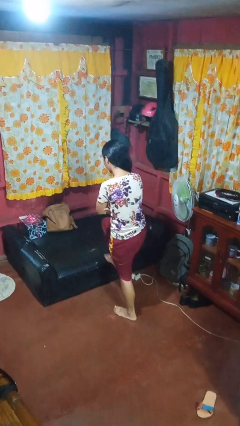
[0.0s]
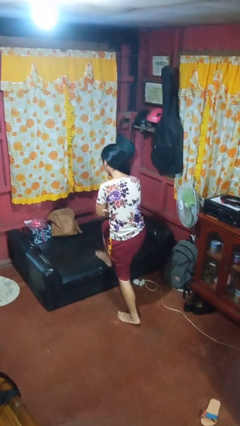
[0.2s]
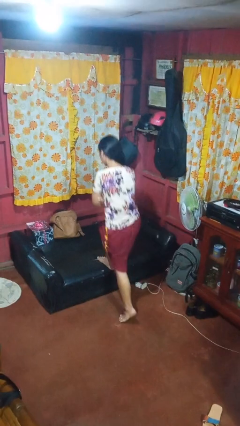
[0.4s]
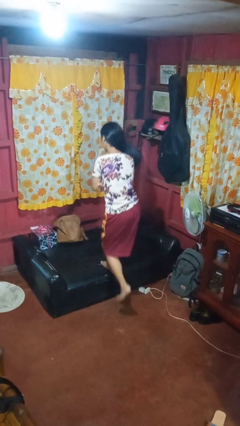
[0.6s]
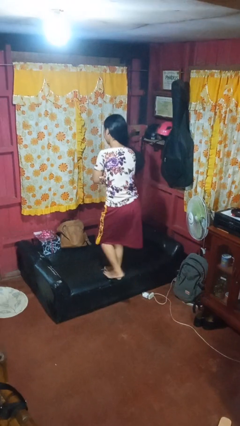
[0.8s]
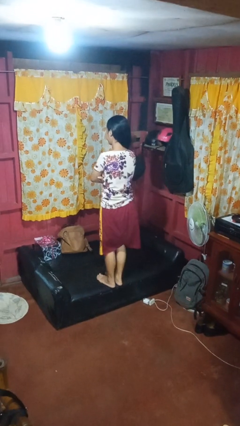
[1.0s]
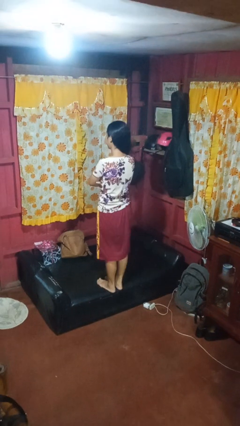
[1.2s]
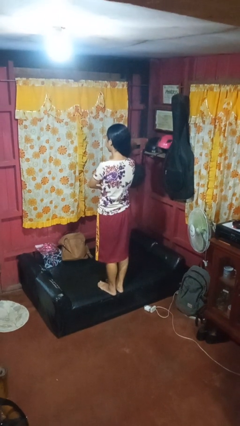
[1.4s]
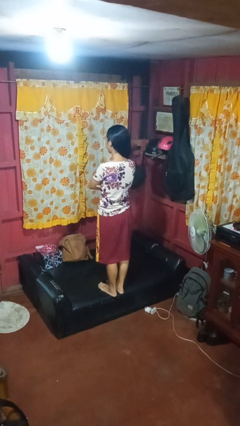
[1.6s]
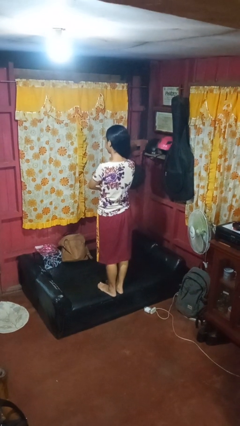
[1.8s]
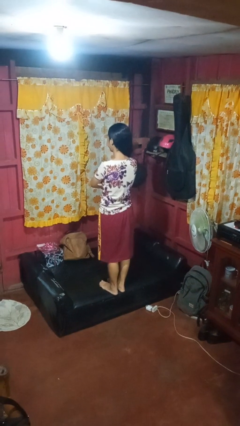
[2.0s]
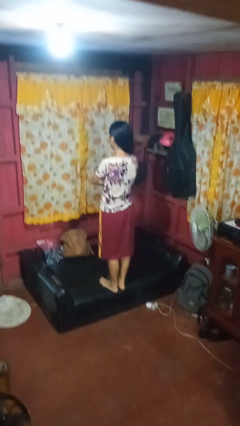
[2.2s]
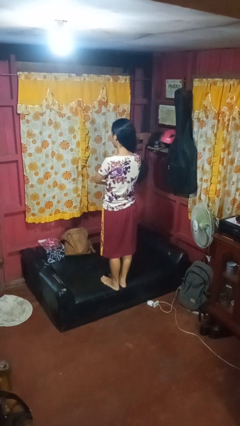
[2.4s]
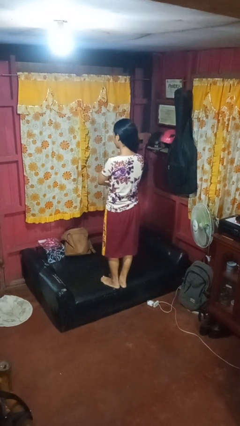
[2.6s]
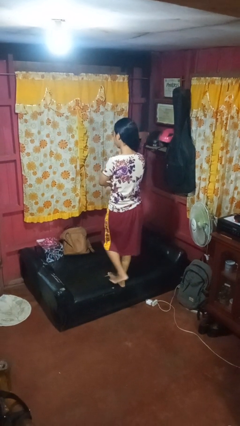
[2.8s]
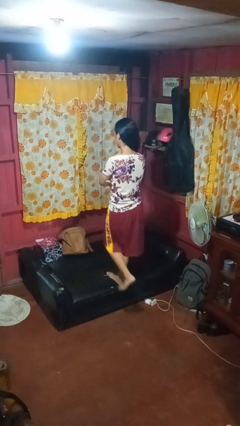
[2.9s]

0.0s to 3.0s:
person climbs on couch

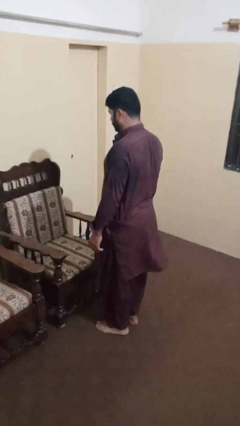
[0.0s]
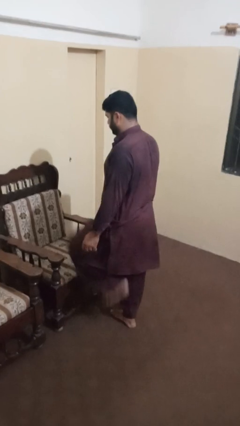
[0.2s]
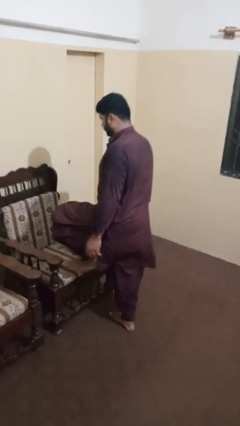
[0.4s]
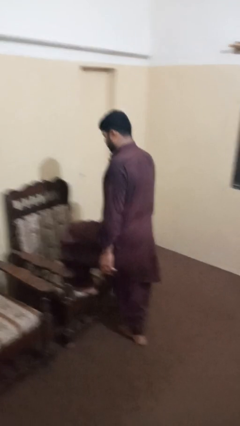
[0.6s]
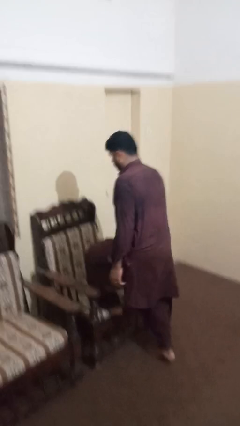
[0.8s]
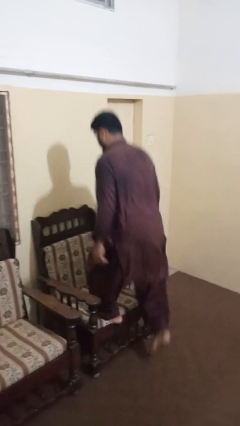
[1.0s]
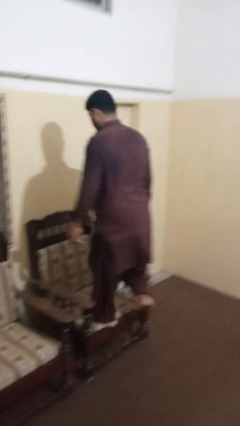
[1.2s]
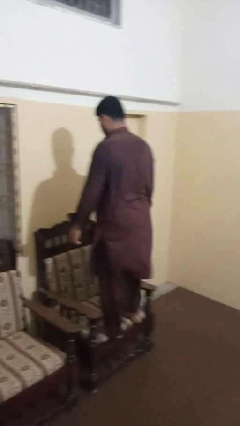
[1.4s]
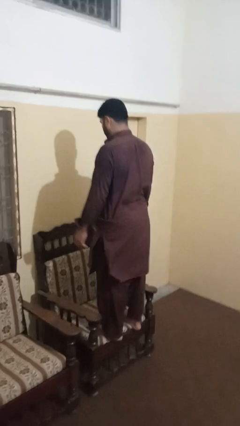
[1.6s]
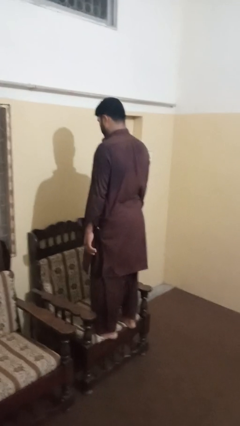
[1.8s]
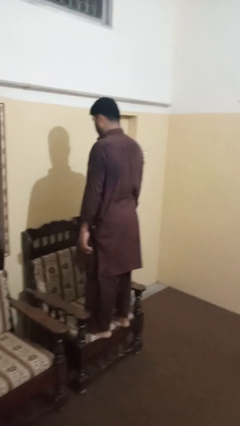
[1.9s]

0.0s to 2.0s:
person climbs on chair

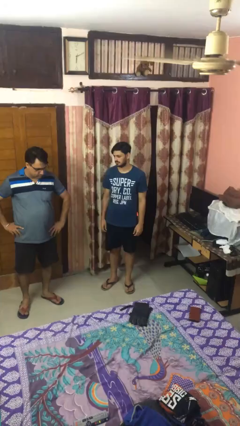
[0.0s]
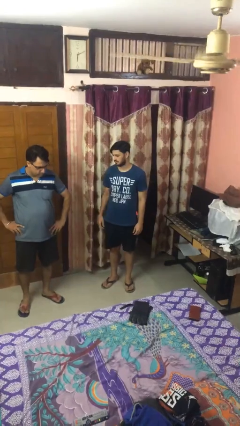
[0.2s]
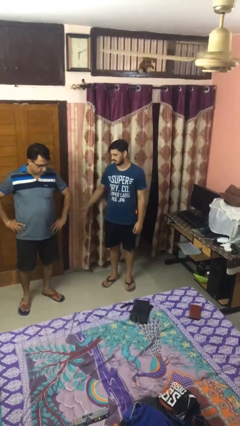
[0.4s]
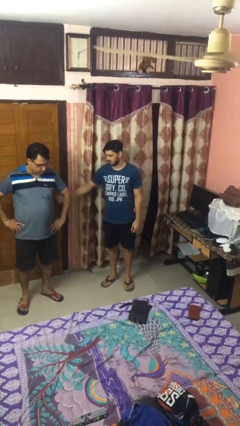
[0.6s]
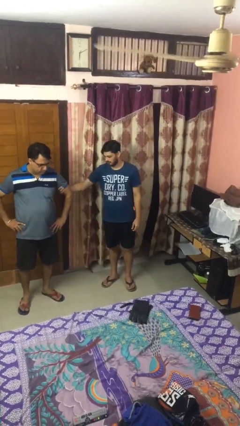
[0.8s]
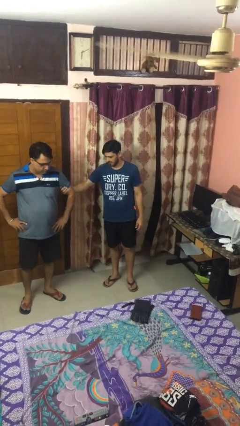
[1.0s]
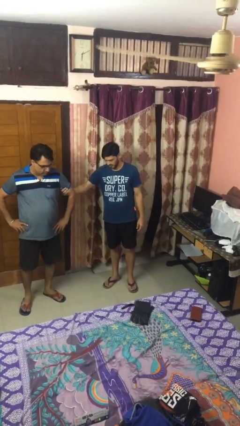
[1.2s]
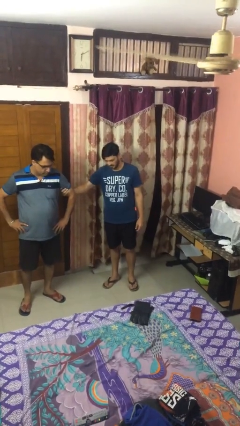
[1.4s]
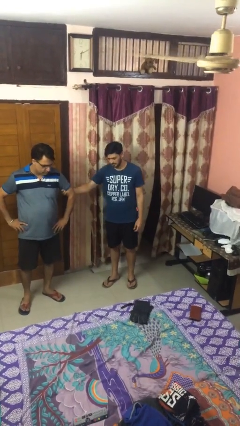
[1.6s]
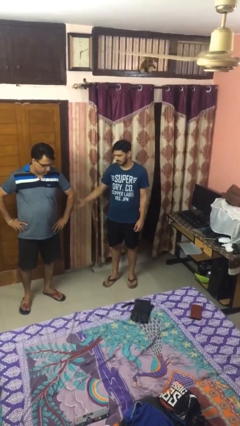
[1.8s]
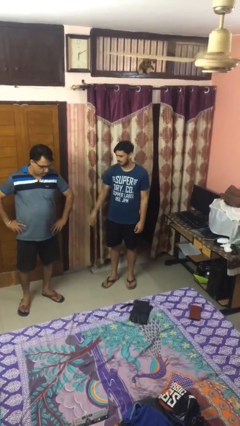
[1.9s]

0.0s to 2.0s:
person grabs person by bicep

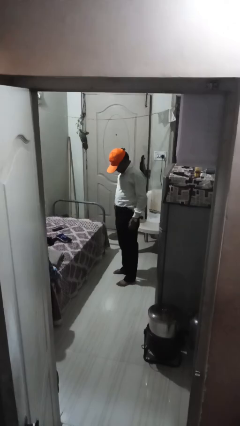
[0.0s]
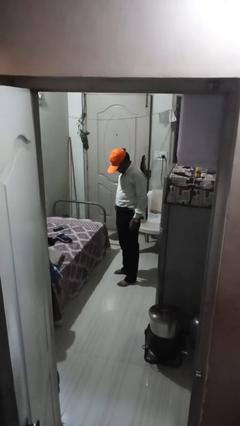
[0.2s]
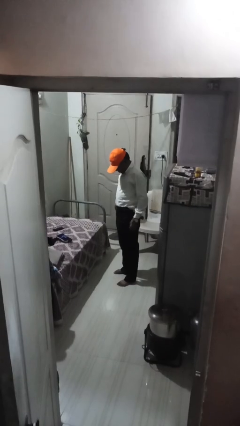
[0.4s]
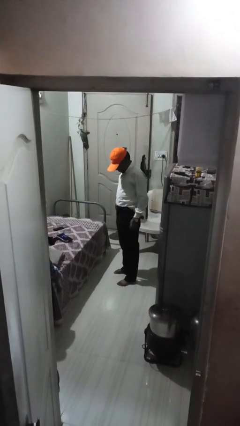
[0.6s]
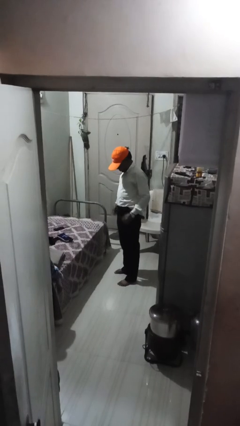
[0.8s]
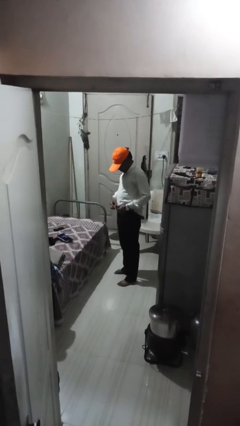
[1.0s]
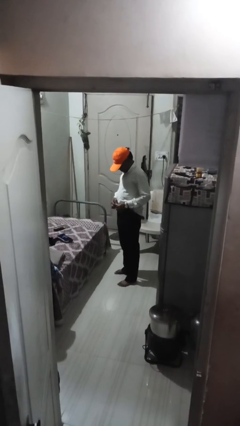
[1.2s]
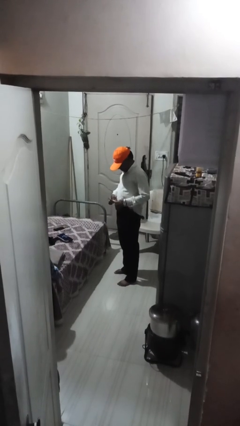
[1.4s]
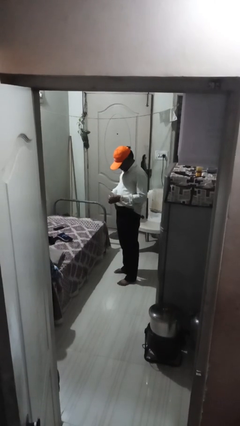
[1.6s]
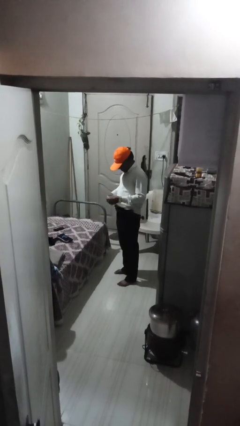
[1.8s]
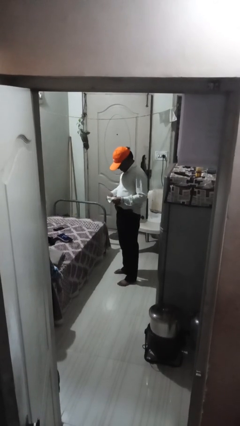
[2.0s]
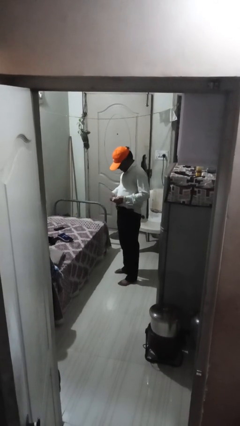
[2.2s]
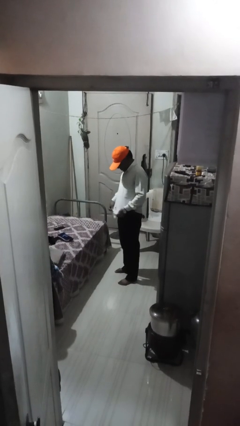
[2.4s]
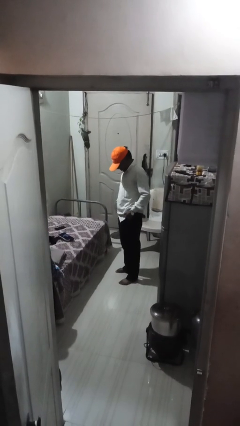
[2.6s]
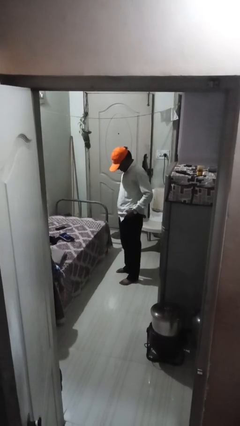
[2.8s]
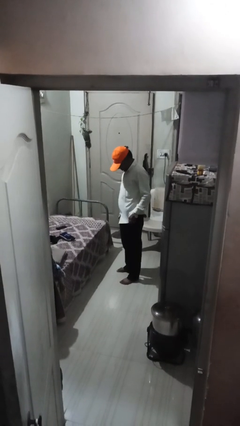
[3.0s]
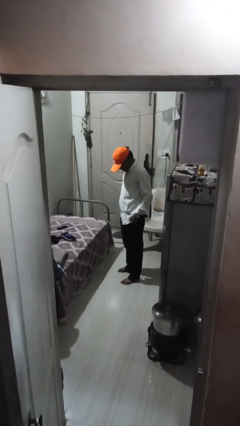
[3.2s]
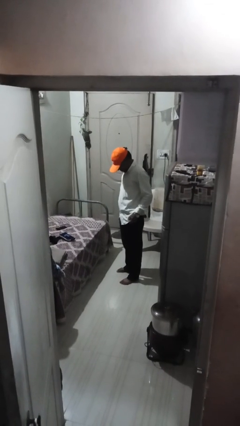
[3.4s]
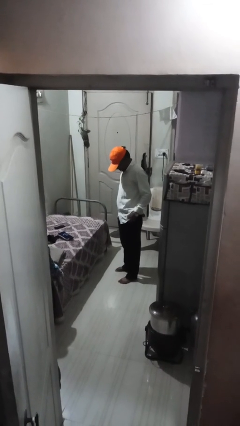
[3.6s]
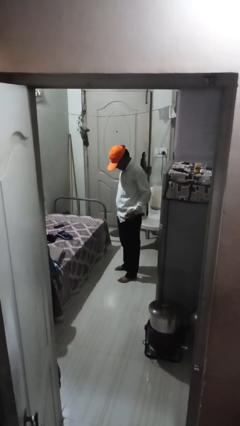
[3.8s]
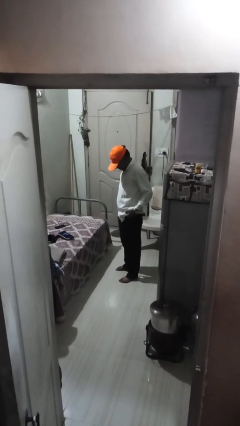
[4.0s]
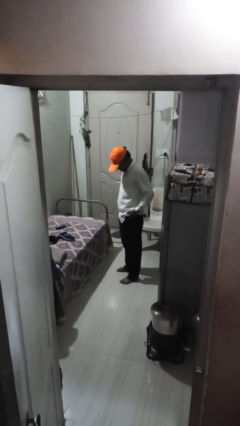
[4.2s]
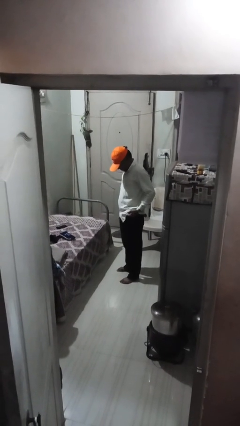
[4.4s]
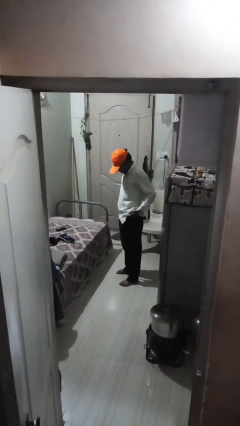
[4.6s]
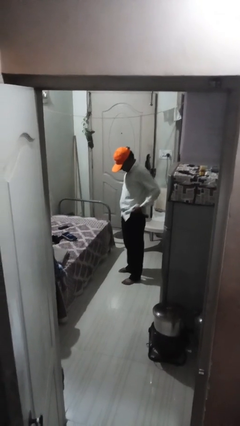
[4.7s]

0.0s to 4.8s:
person untucks shirt

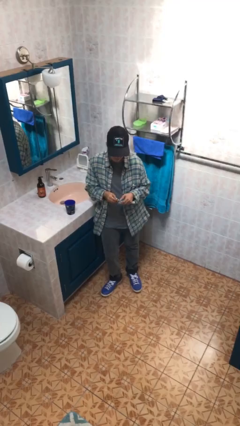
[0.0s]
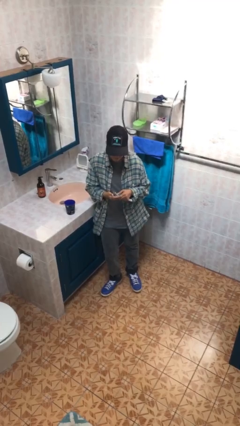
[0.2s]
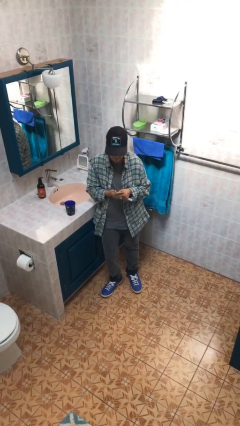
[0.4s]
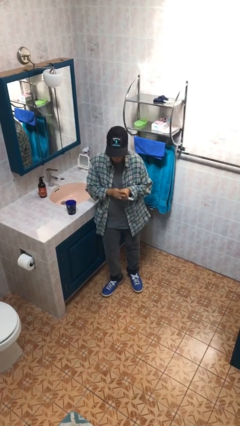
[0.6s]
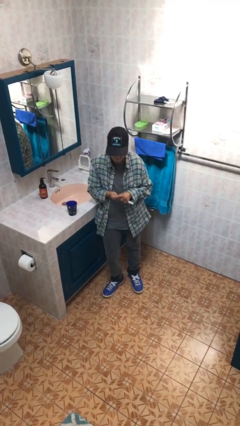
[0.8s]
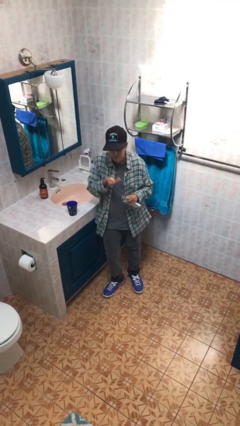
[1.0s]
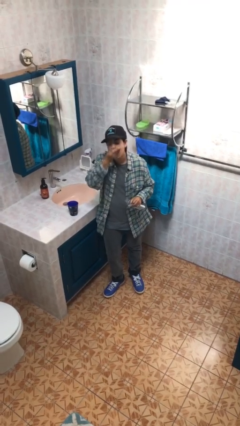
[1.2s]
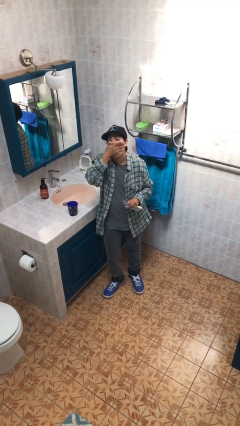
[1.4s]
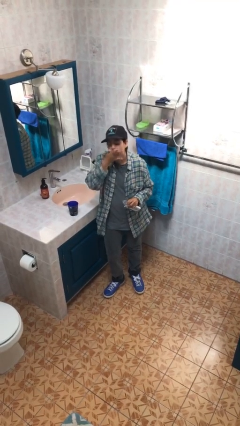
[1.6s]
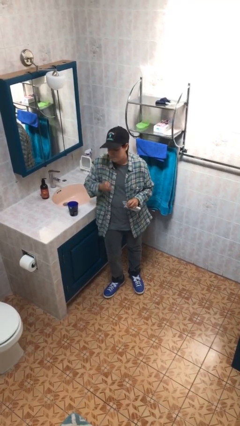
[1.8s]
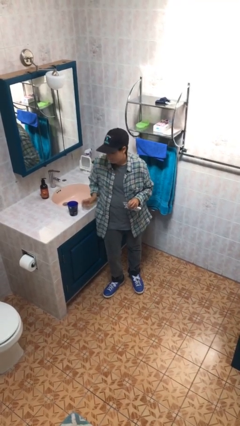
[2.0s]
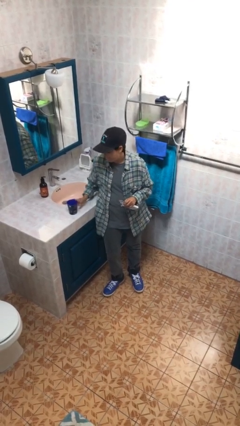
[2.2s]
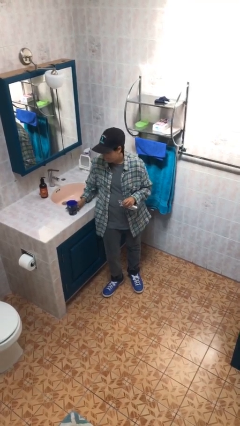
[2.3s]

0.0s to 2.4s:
person takes medicine pills

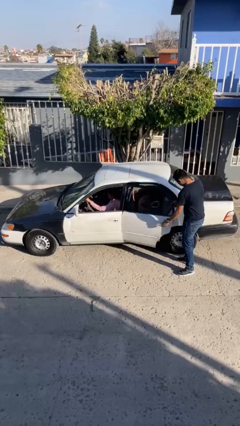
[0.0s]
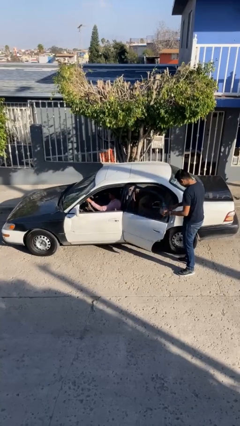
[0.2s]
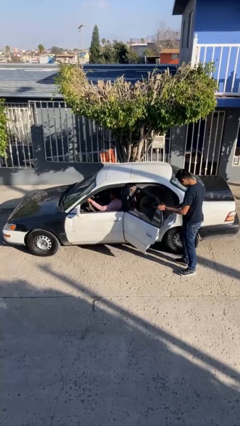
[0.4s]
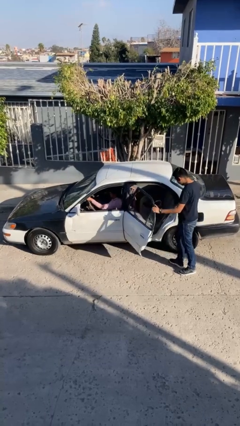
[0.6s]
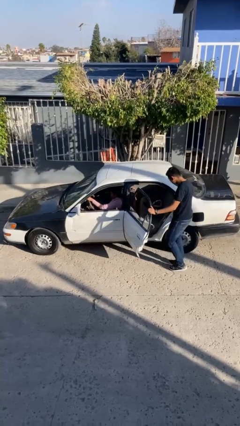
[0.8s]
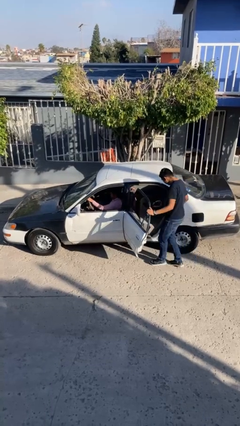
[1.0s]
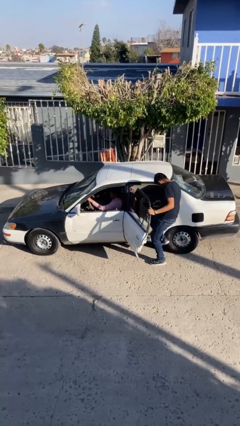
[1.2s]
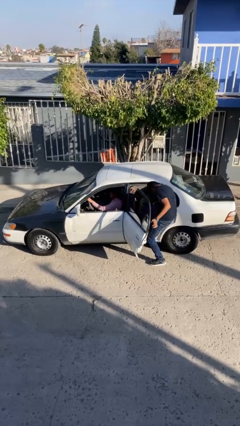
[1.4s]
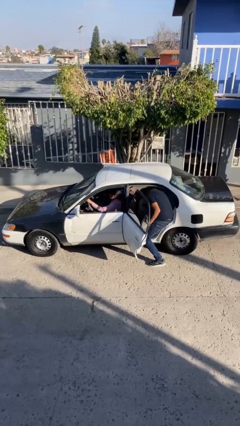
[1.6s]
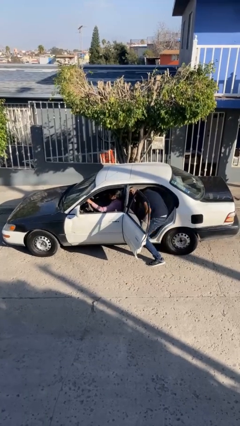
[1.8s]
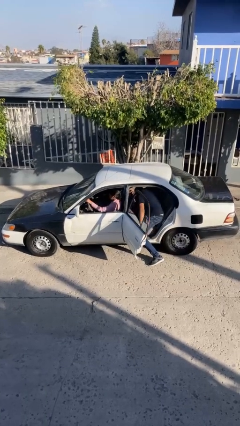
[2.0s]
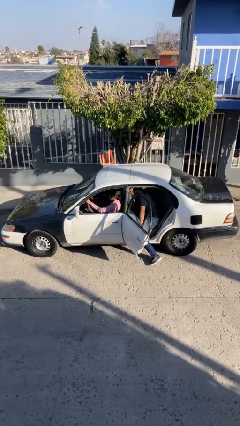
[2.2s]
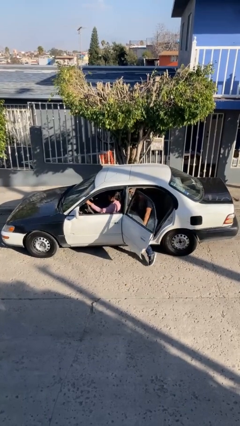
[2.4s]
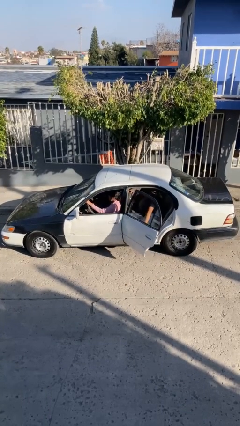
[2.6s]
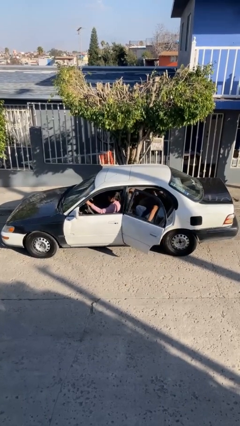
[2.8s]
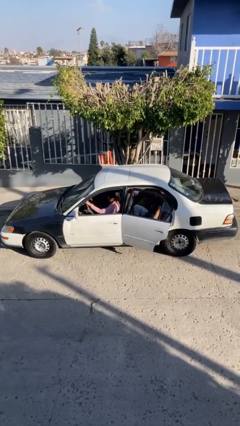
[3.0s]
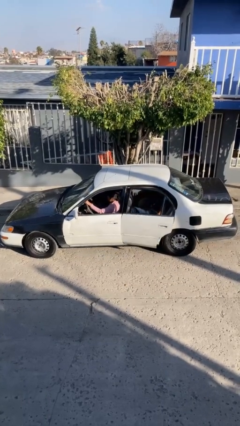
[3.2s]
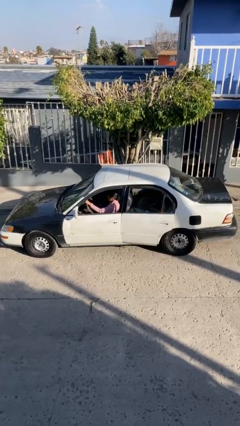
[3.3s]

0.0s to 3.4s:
car picks up person
